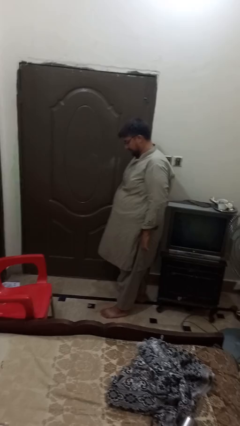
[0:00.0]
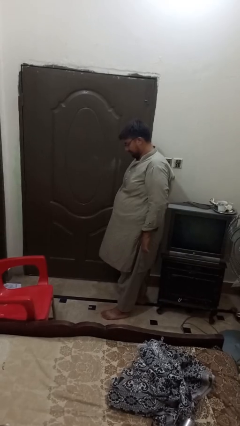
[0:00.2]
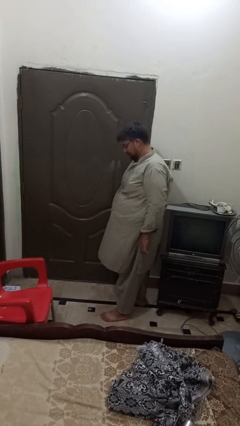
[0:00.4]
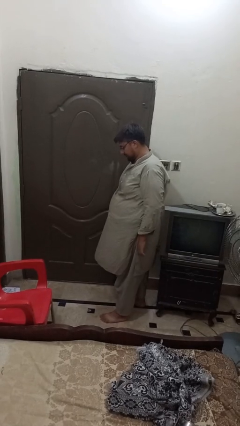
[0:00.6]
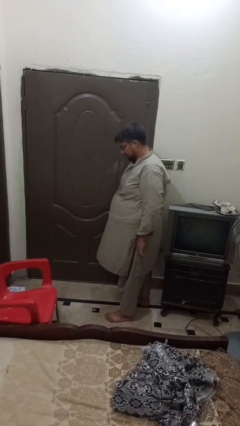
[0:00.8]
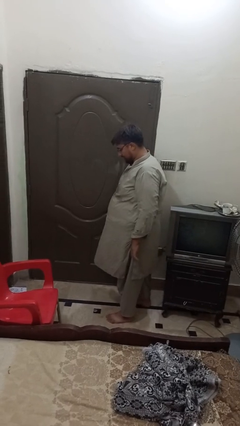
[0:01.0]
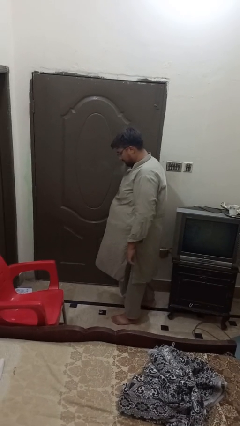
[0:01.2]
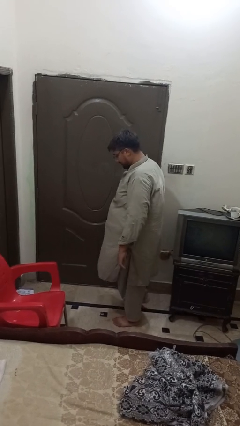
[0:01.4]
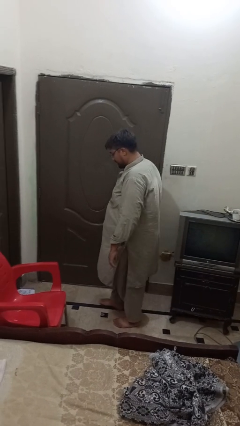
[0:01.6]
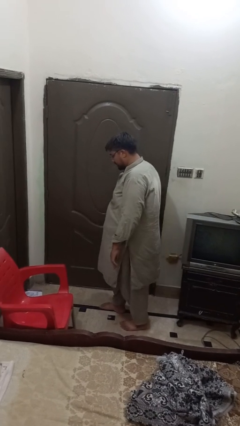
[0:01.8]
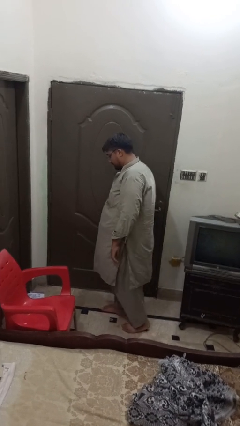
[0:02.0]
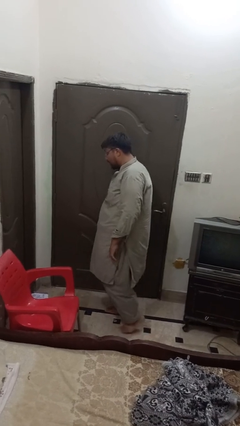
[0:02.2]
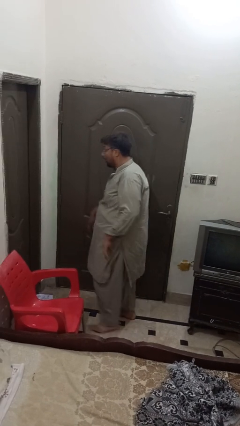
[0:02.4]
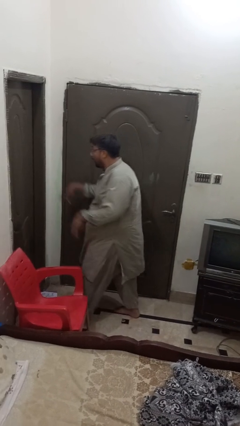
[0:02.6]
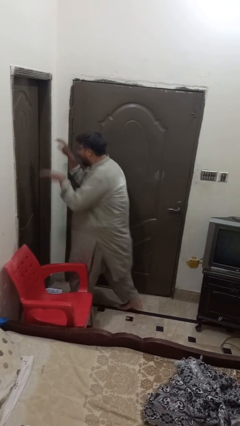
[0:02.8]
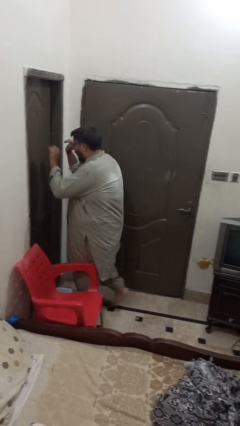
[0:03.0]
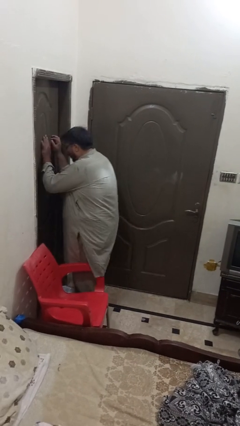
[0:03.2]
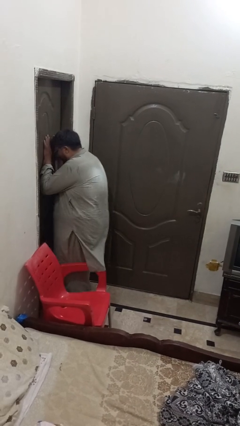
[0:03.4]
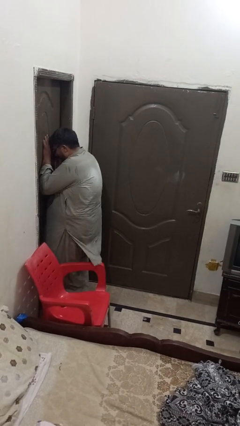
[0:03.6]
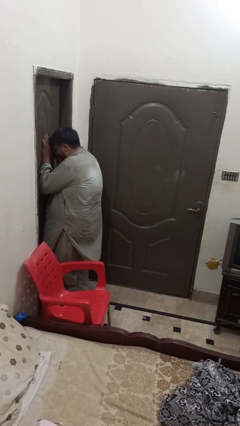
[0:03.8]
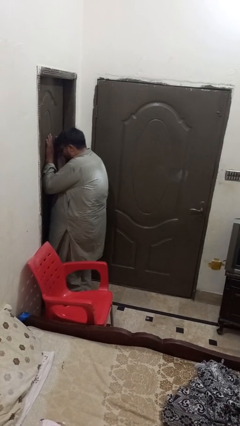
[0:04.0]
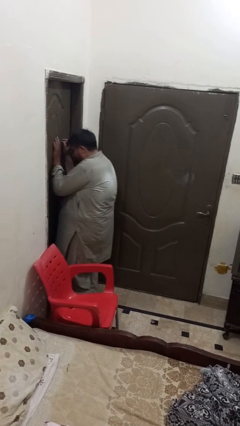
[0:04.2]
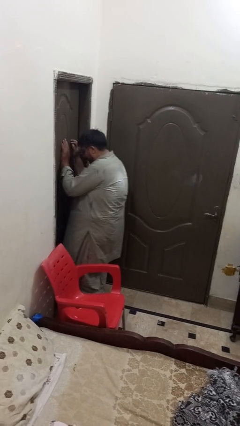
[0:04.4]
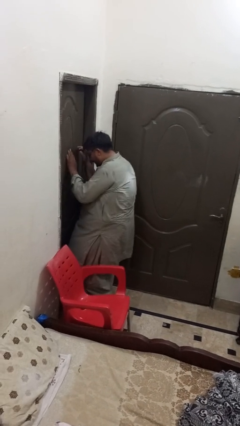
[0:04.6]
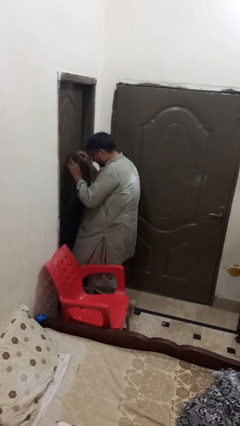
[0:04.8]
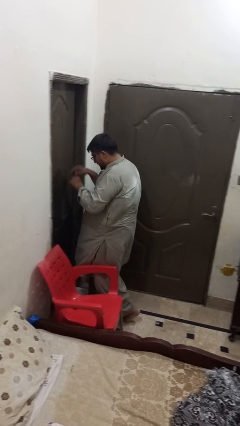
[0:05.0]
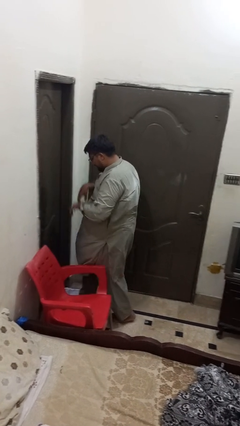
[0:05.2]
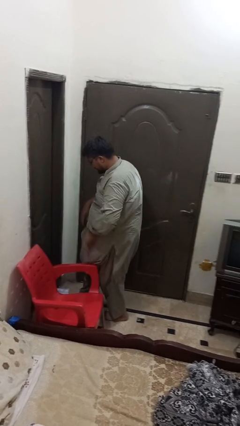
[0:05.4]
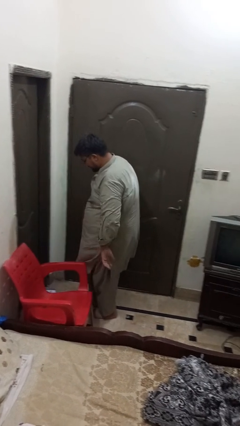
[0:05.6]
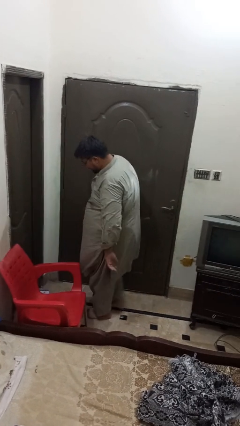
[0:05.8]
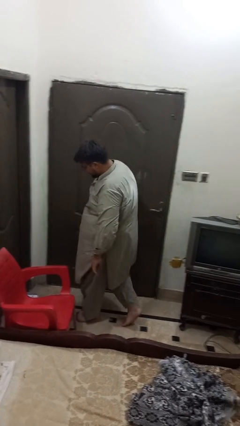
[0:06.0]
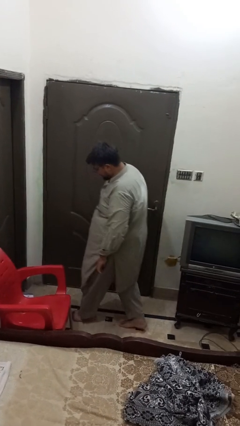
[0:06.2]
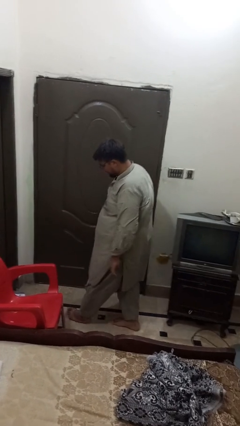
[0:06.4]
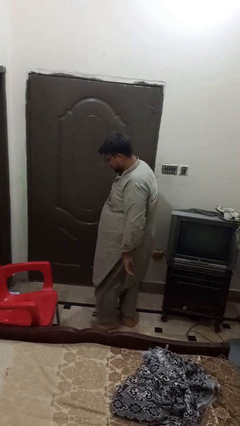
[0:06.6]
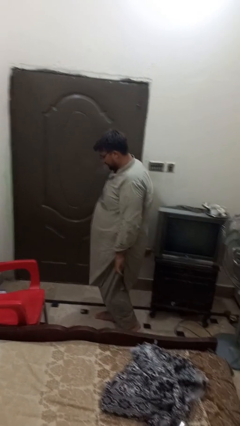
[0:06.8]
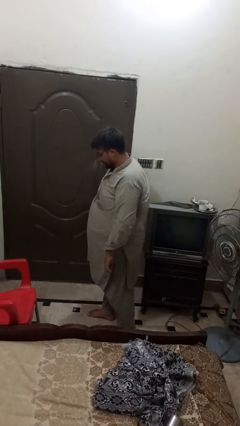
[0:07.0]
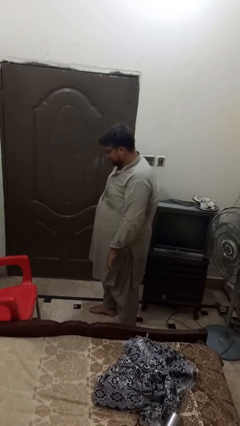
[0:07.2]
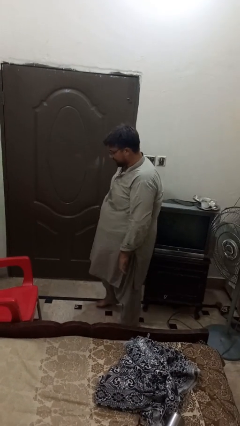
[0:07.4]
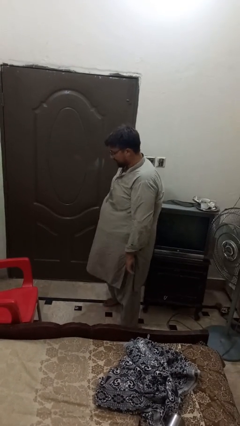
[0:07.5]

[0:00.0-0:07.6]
person bumps into wall

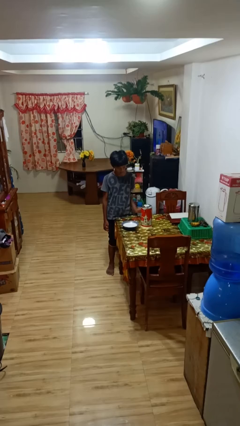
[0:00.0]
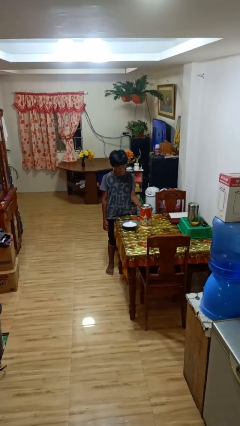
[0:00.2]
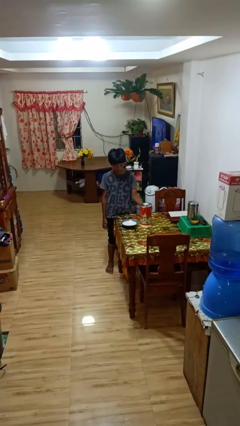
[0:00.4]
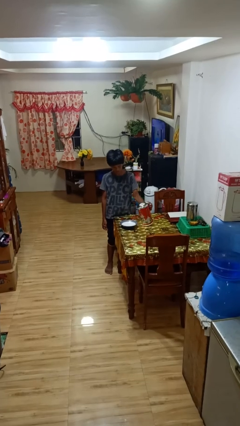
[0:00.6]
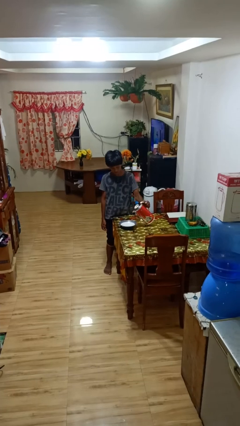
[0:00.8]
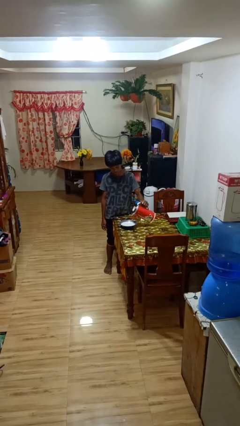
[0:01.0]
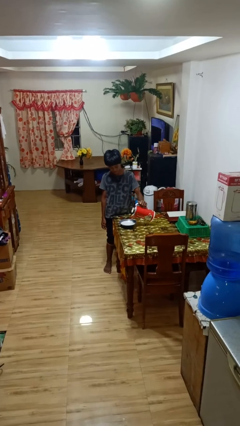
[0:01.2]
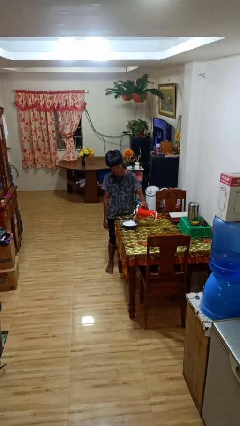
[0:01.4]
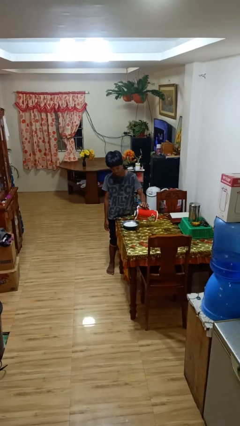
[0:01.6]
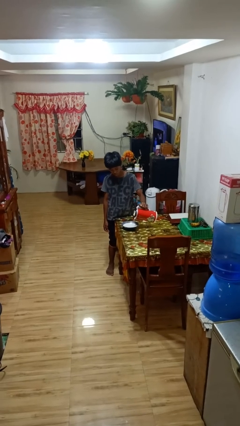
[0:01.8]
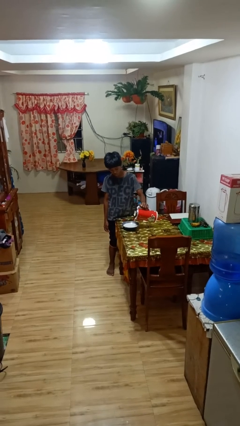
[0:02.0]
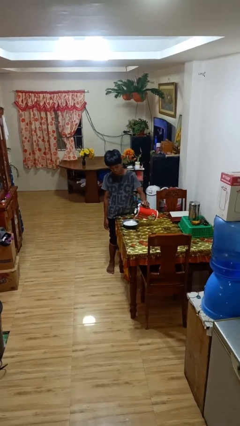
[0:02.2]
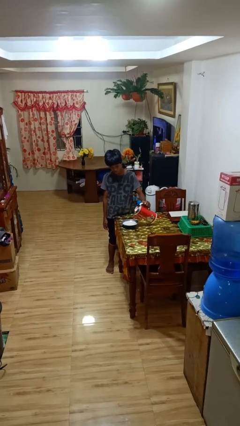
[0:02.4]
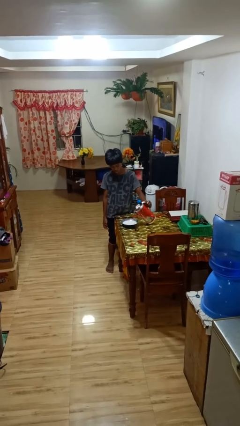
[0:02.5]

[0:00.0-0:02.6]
person pours into bowl

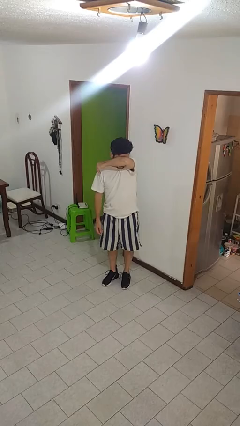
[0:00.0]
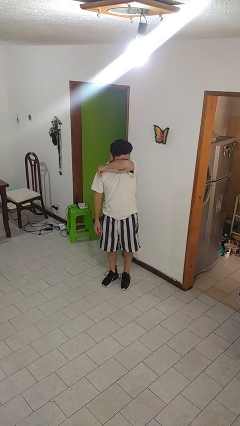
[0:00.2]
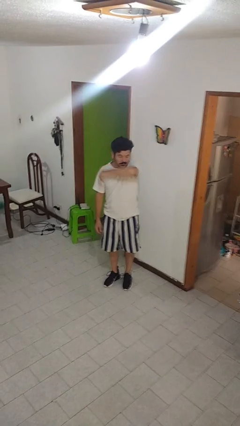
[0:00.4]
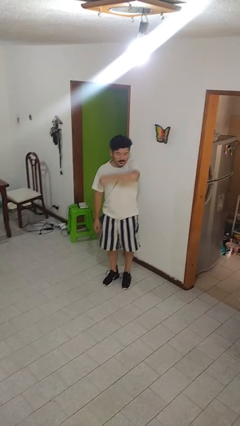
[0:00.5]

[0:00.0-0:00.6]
person sneezes into arm

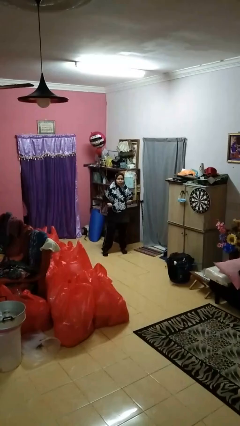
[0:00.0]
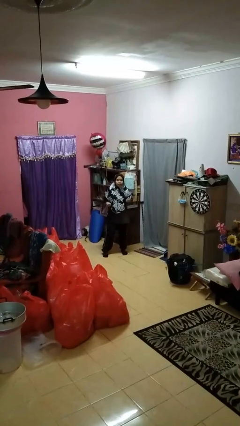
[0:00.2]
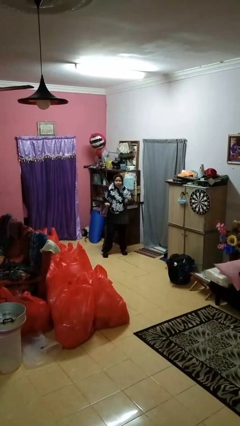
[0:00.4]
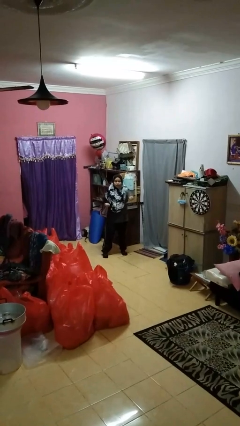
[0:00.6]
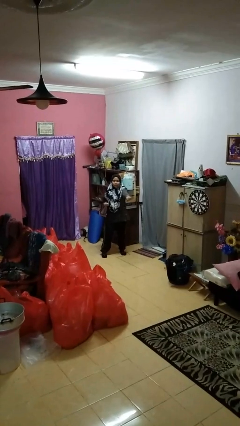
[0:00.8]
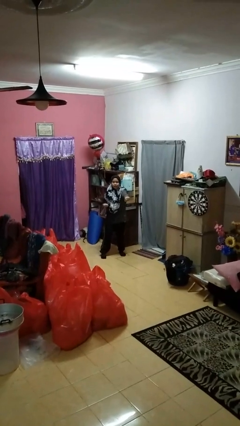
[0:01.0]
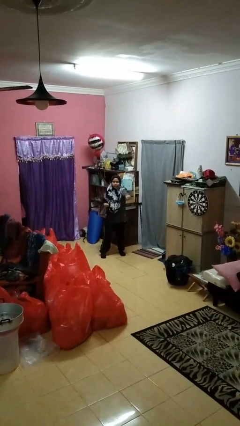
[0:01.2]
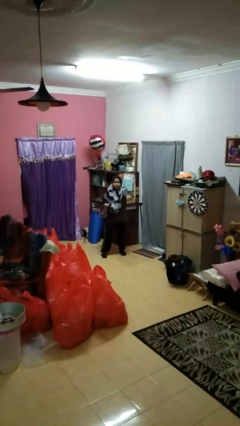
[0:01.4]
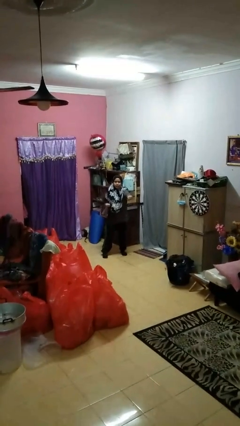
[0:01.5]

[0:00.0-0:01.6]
person punches

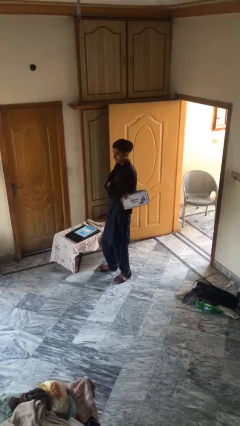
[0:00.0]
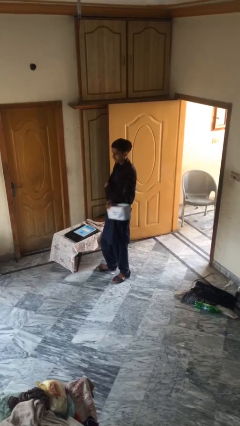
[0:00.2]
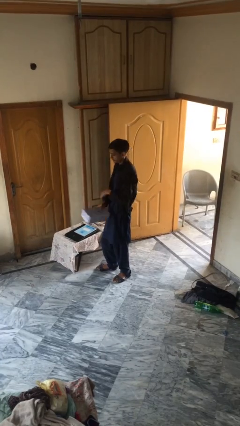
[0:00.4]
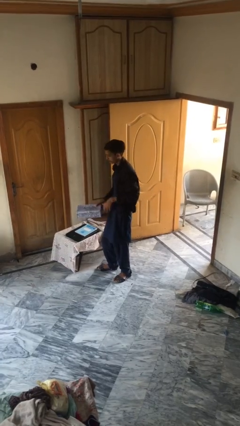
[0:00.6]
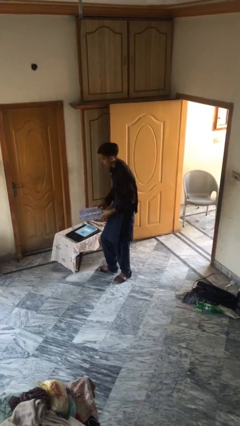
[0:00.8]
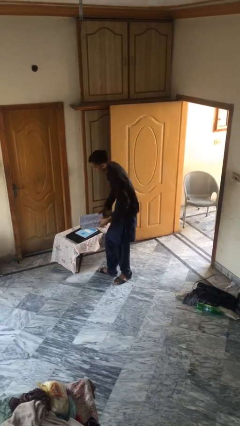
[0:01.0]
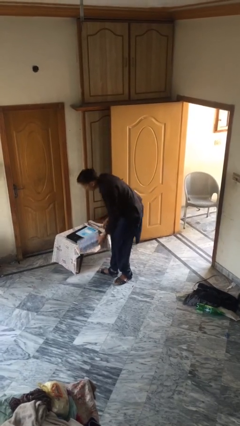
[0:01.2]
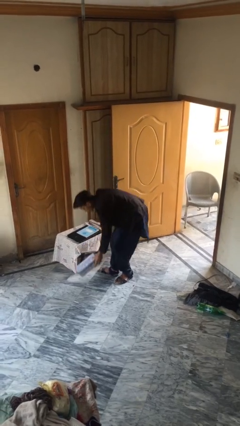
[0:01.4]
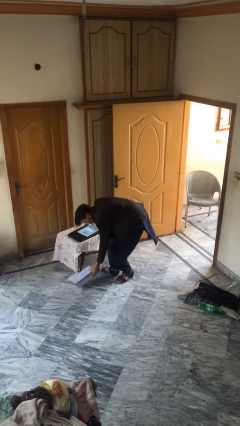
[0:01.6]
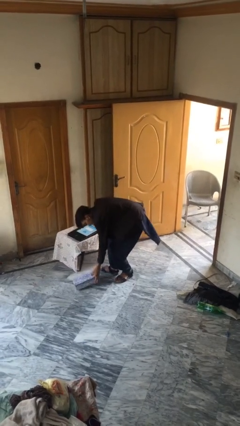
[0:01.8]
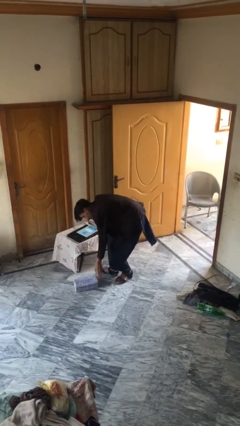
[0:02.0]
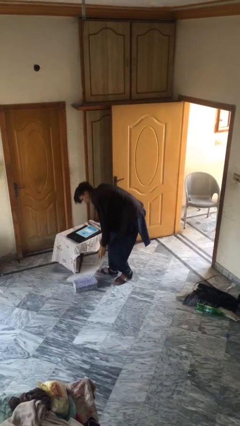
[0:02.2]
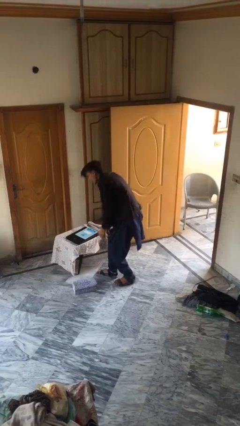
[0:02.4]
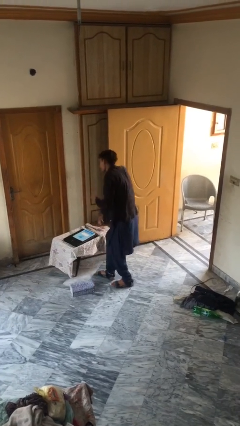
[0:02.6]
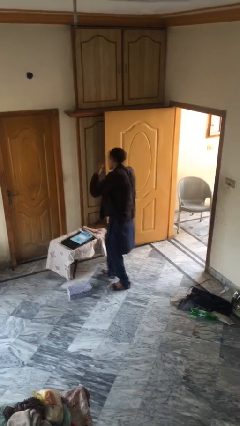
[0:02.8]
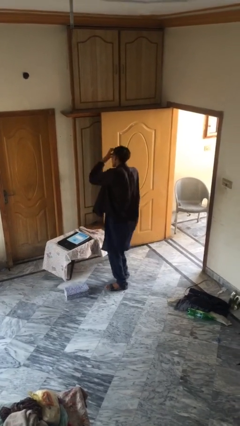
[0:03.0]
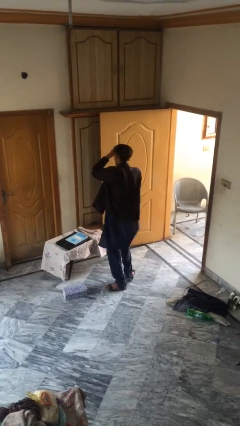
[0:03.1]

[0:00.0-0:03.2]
person puts down object on floor

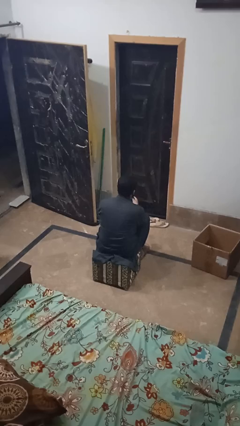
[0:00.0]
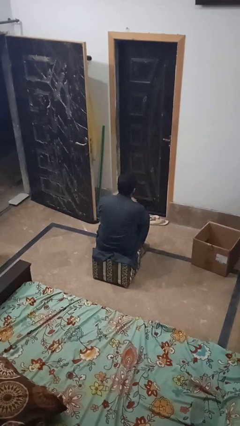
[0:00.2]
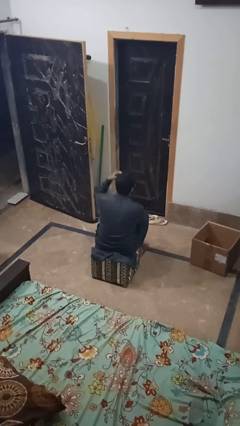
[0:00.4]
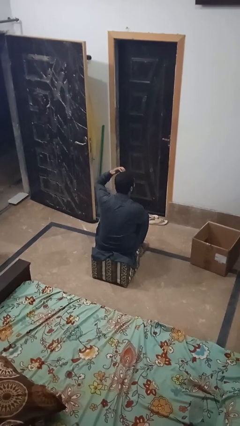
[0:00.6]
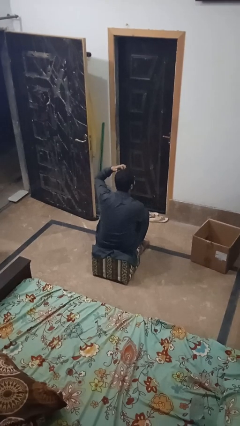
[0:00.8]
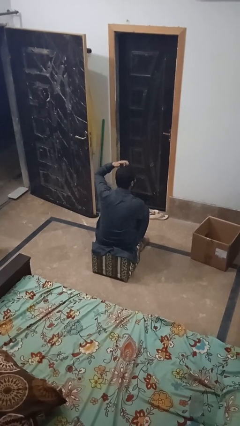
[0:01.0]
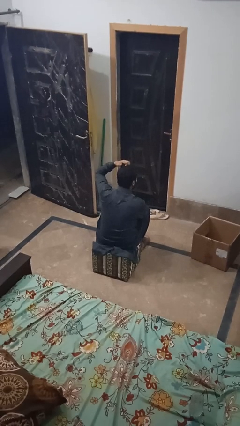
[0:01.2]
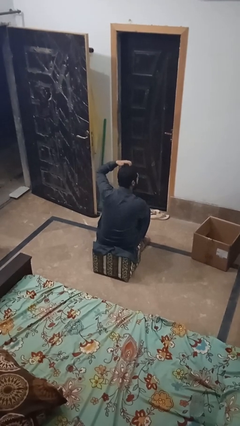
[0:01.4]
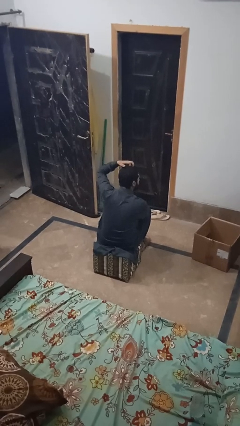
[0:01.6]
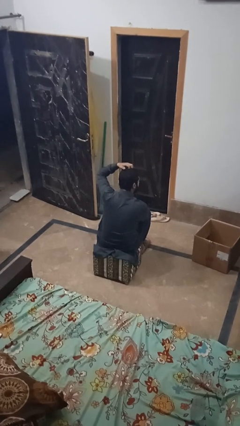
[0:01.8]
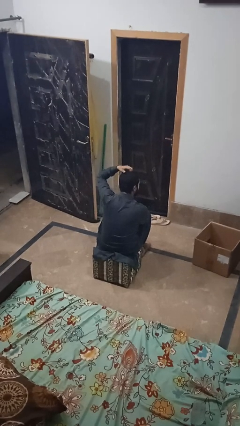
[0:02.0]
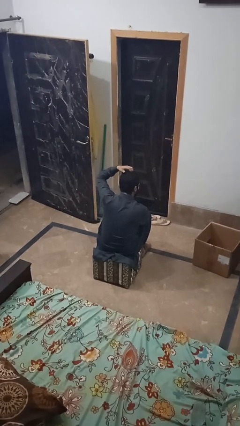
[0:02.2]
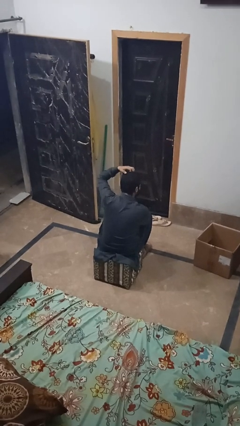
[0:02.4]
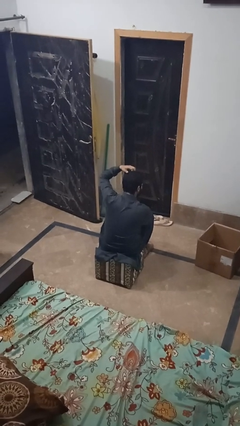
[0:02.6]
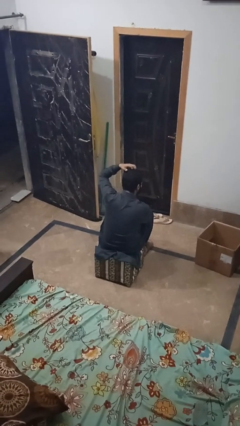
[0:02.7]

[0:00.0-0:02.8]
person strokes hair
